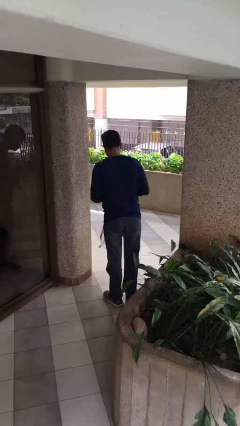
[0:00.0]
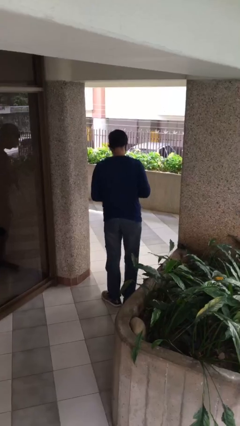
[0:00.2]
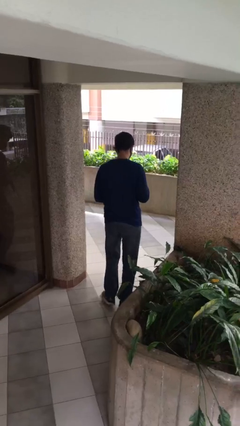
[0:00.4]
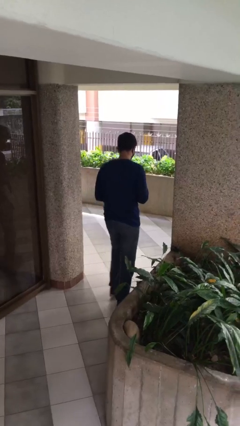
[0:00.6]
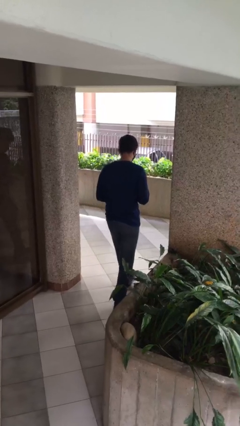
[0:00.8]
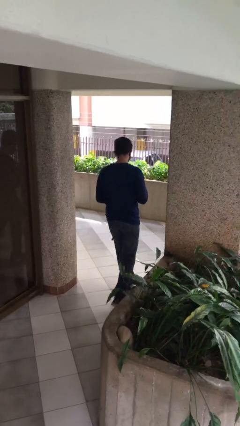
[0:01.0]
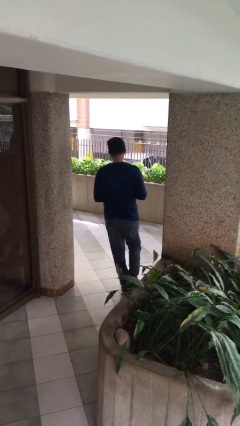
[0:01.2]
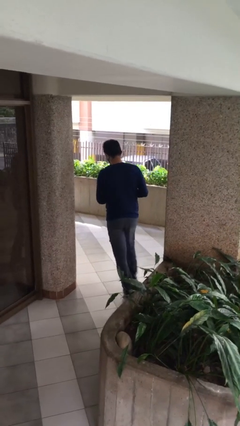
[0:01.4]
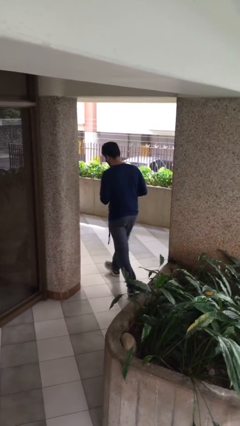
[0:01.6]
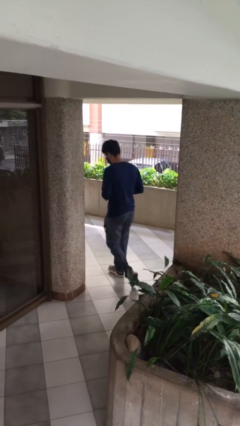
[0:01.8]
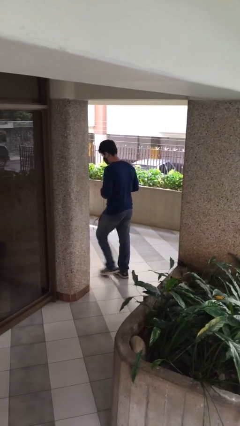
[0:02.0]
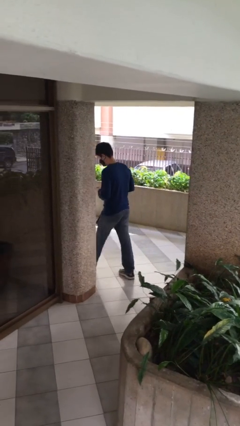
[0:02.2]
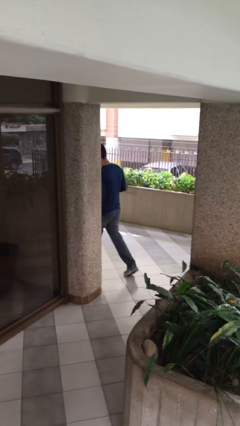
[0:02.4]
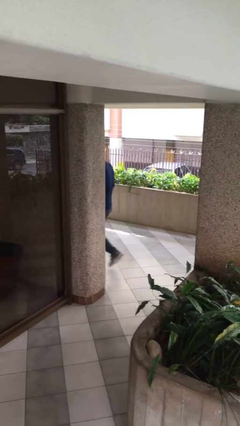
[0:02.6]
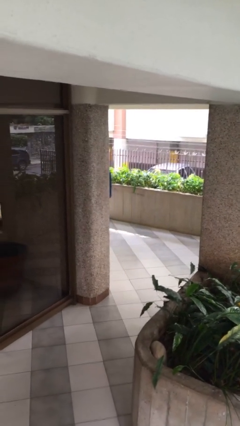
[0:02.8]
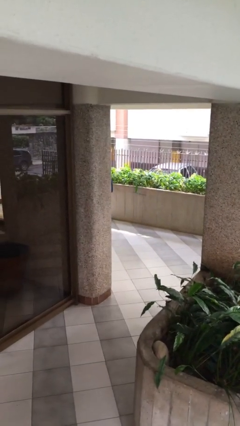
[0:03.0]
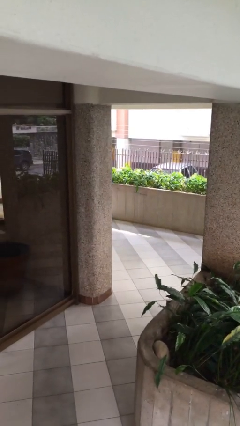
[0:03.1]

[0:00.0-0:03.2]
person exits scene through structure

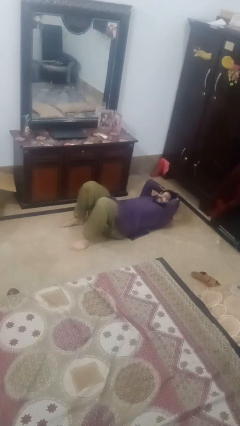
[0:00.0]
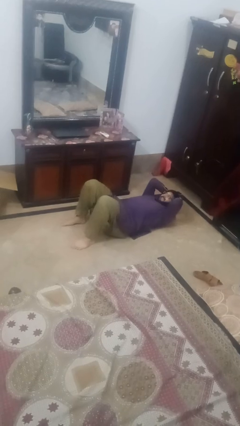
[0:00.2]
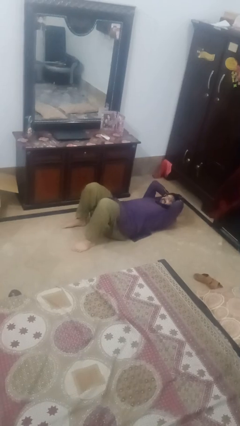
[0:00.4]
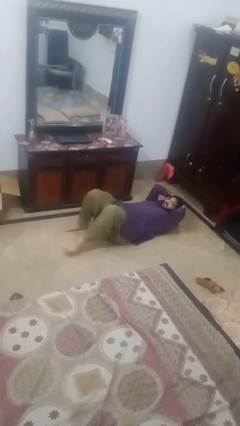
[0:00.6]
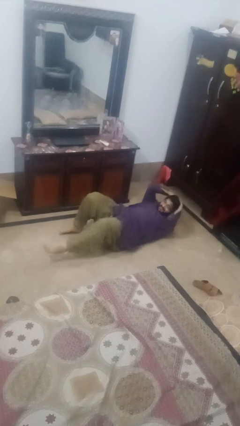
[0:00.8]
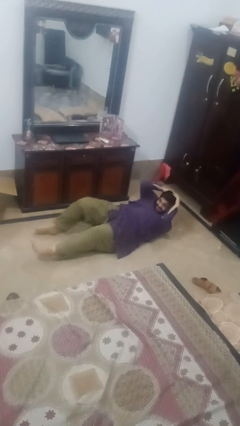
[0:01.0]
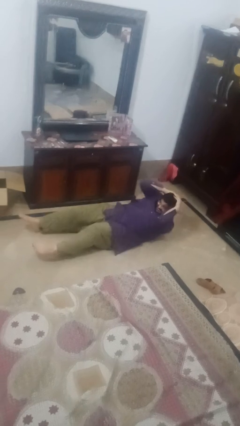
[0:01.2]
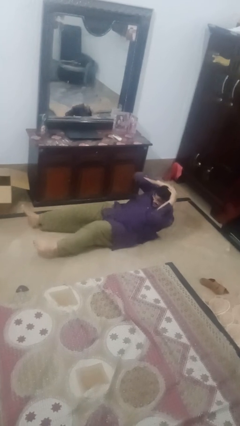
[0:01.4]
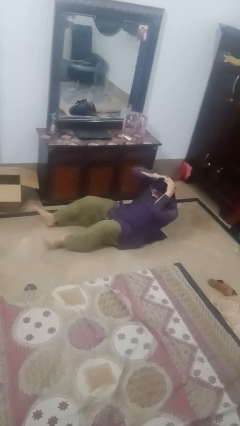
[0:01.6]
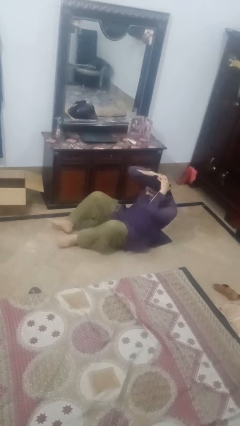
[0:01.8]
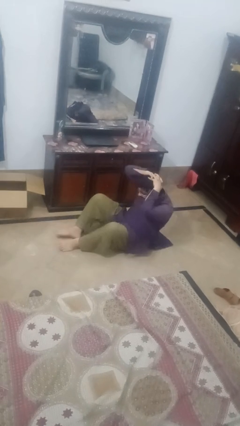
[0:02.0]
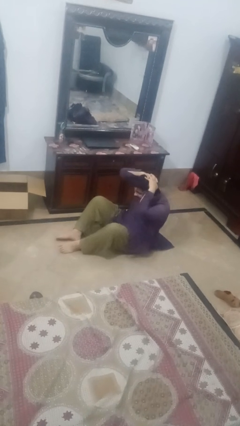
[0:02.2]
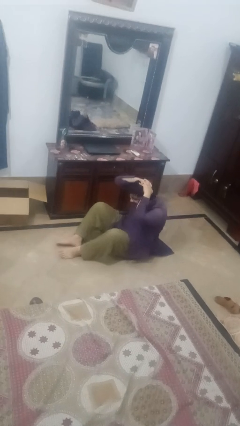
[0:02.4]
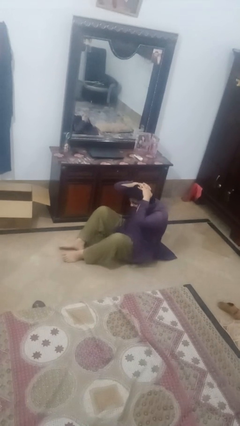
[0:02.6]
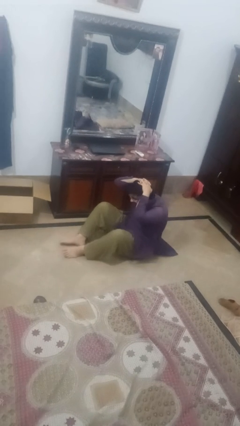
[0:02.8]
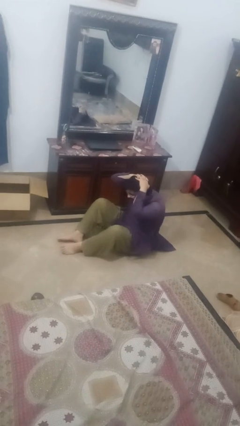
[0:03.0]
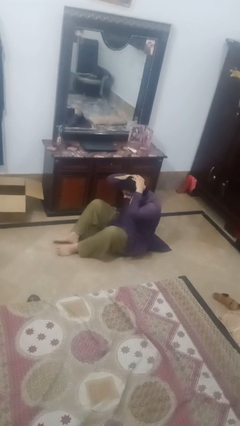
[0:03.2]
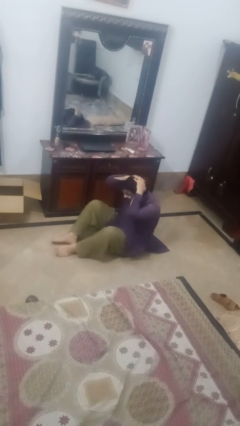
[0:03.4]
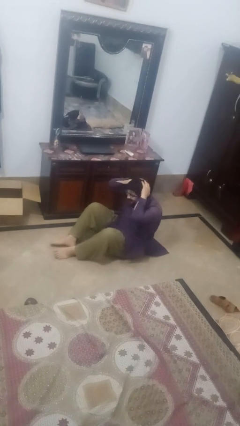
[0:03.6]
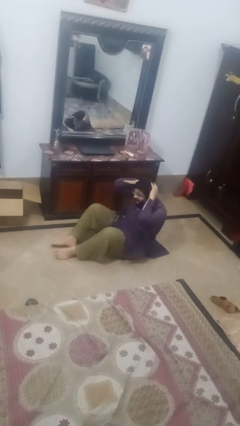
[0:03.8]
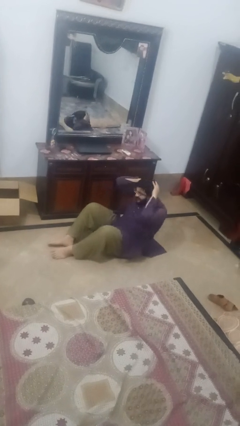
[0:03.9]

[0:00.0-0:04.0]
person exercises with situp

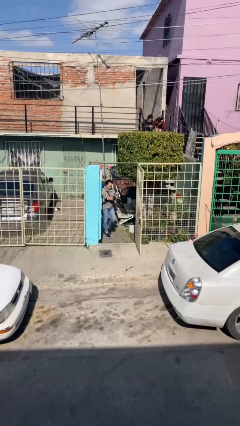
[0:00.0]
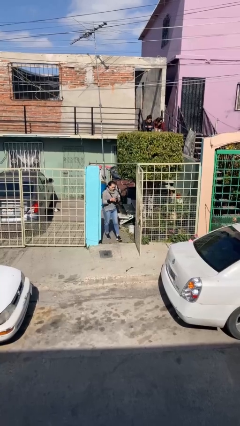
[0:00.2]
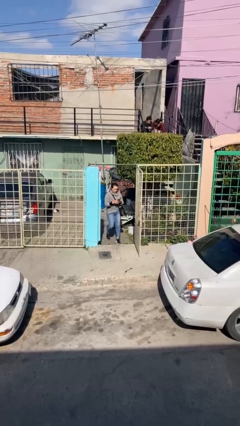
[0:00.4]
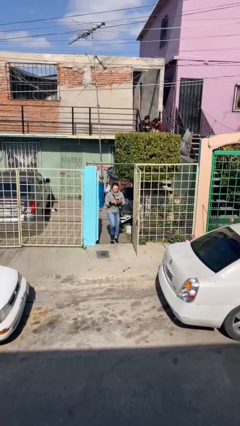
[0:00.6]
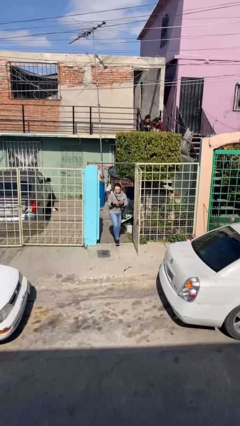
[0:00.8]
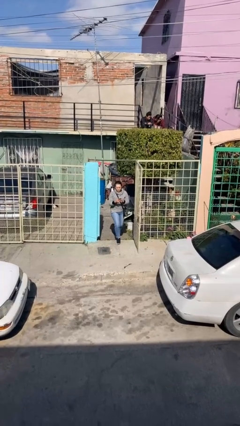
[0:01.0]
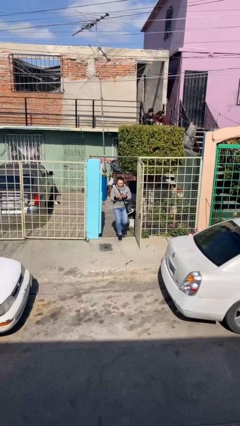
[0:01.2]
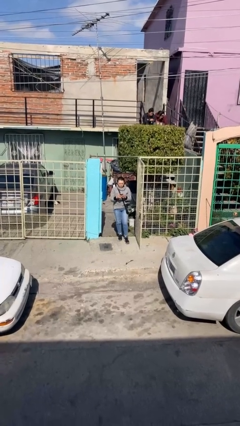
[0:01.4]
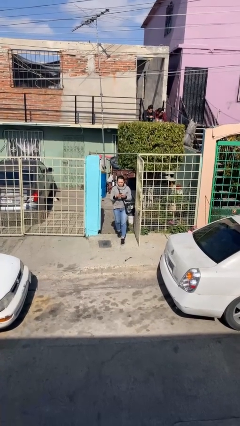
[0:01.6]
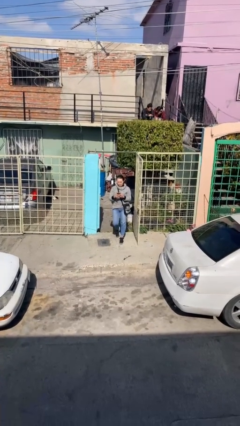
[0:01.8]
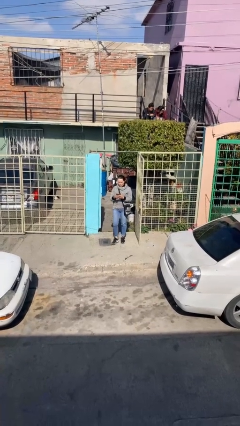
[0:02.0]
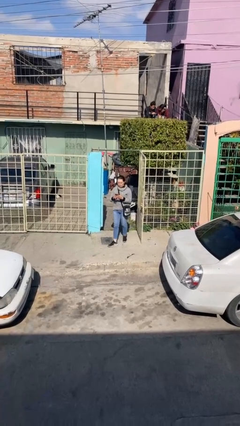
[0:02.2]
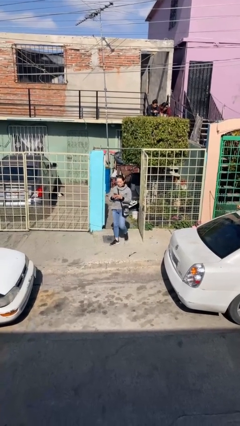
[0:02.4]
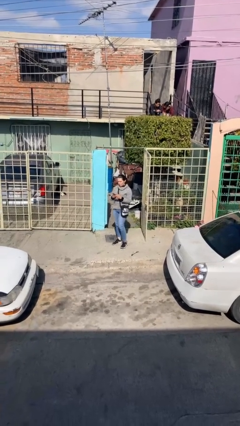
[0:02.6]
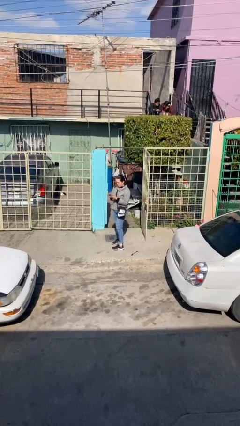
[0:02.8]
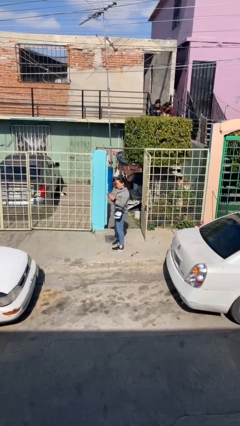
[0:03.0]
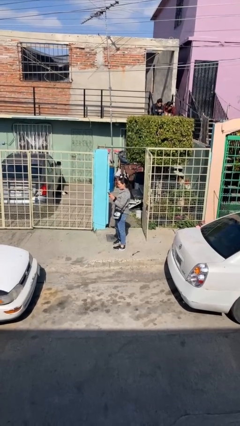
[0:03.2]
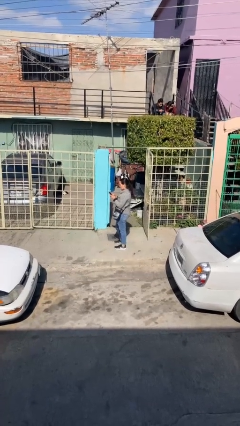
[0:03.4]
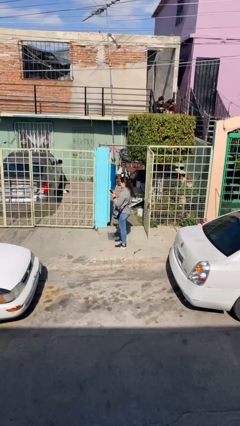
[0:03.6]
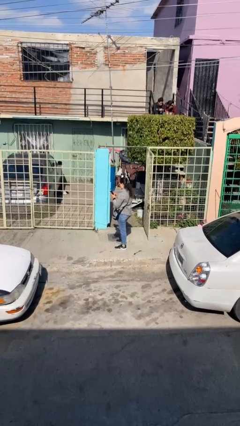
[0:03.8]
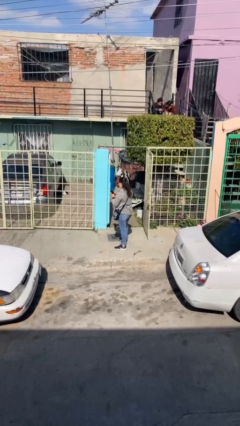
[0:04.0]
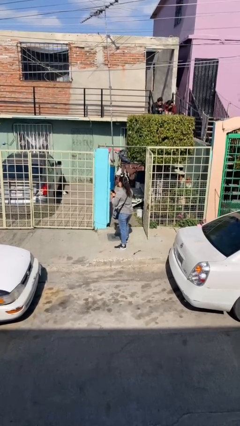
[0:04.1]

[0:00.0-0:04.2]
person enters scene through structure

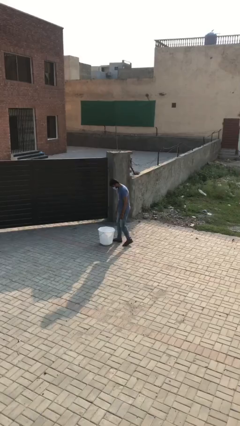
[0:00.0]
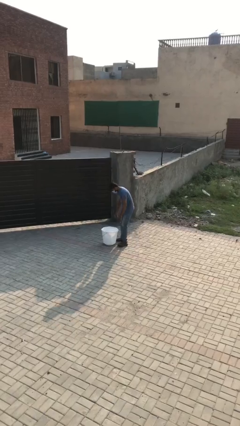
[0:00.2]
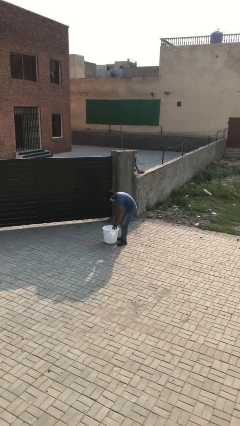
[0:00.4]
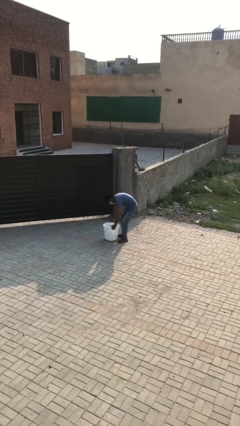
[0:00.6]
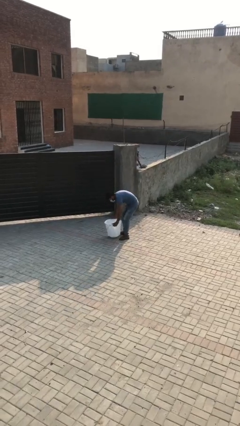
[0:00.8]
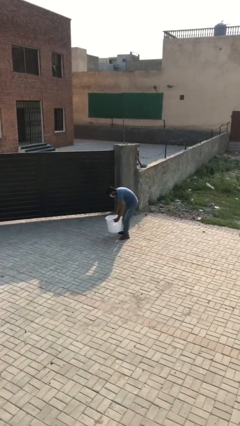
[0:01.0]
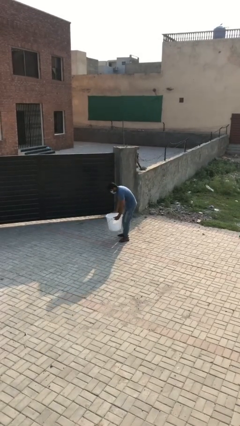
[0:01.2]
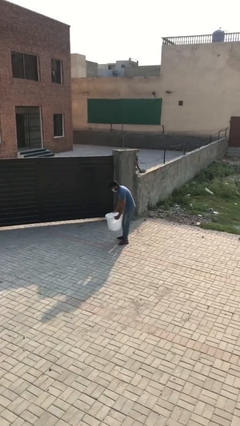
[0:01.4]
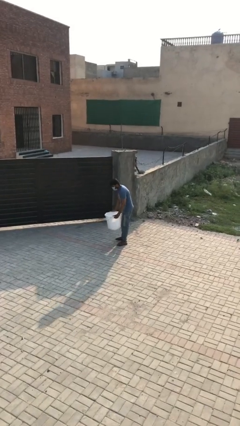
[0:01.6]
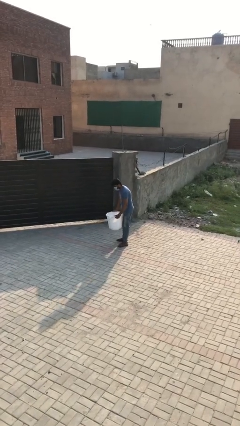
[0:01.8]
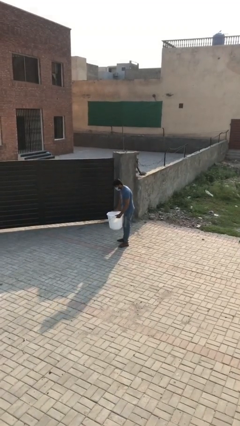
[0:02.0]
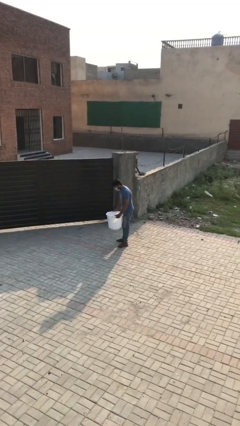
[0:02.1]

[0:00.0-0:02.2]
person picks up object from floor

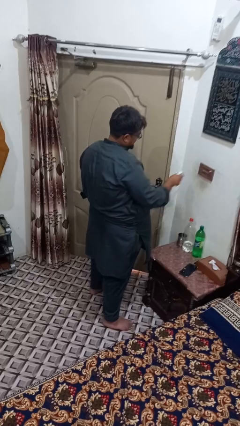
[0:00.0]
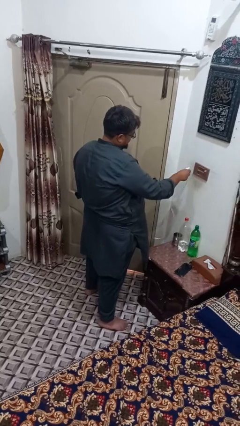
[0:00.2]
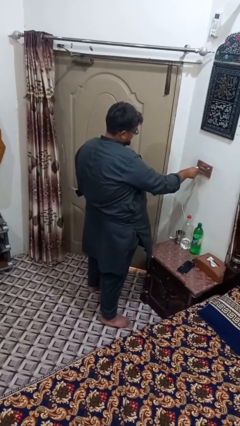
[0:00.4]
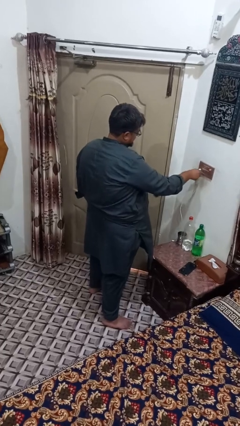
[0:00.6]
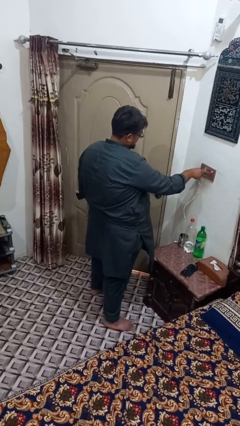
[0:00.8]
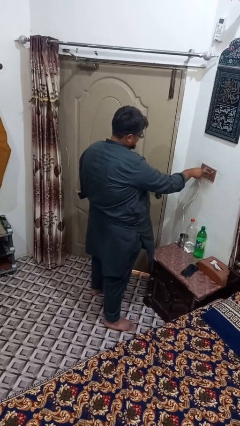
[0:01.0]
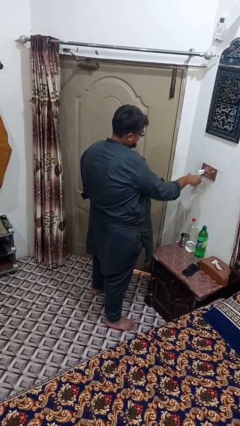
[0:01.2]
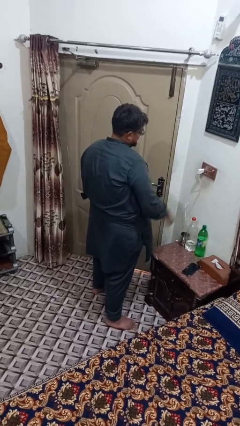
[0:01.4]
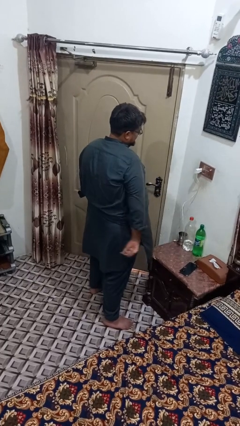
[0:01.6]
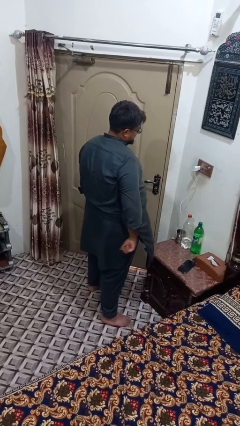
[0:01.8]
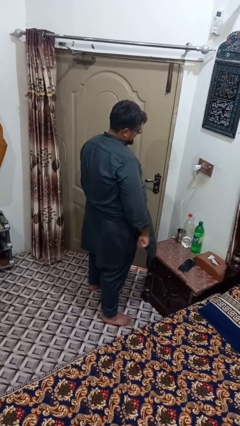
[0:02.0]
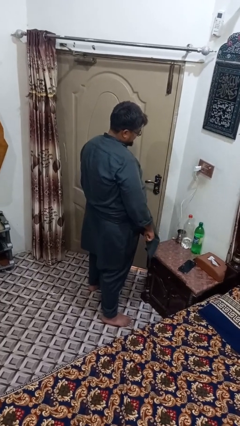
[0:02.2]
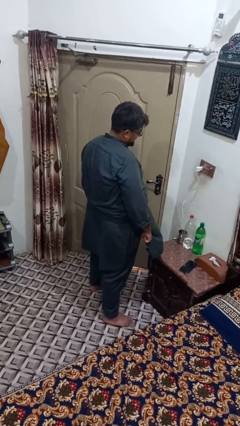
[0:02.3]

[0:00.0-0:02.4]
person plugs into electrical socket

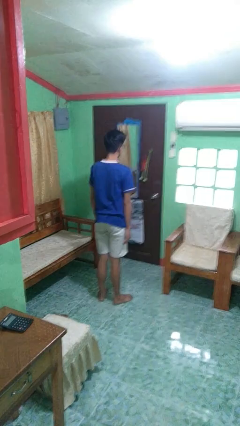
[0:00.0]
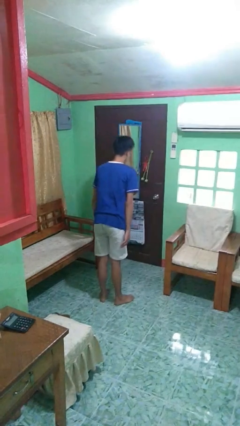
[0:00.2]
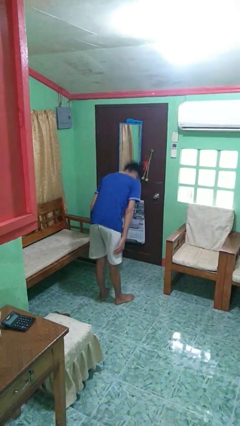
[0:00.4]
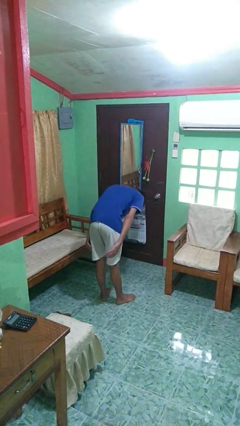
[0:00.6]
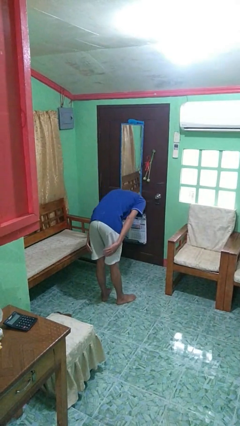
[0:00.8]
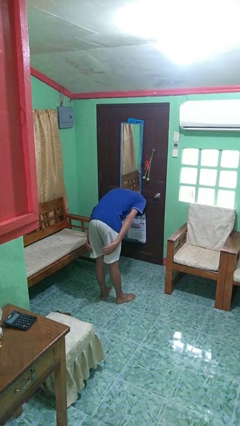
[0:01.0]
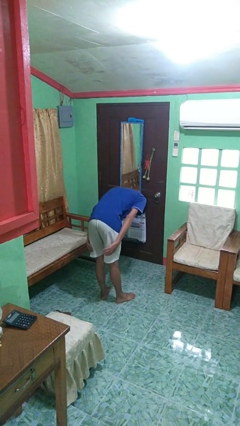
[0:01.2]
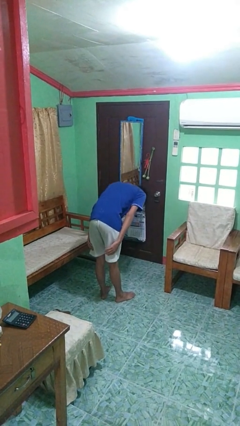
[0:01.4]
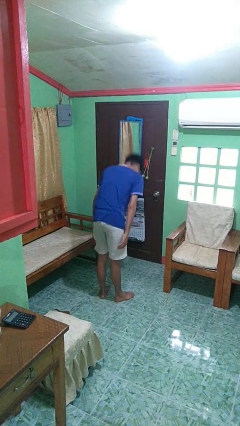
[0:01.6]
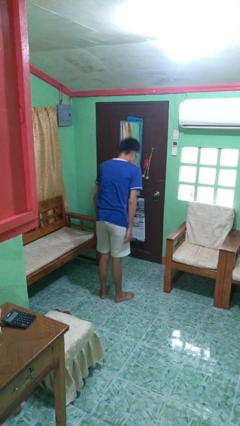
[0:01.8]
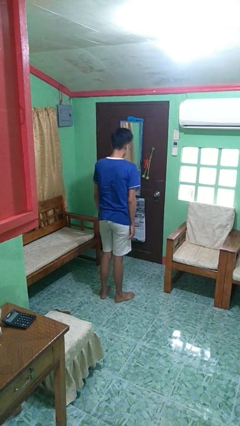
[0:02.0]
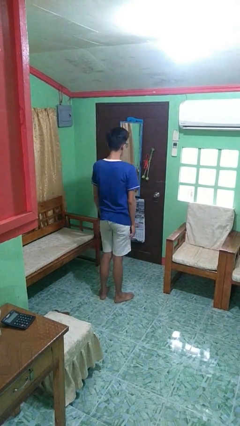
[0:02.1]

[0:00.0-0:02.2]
person bows
